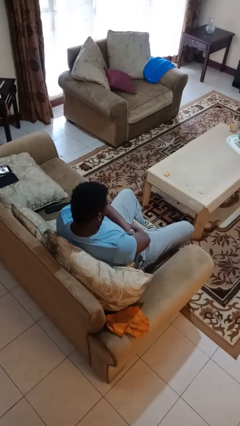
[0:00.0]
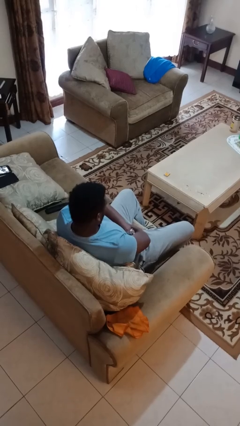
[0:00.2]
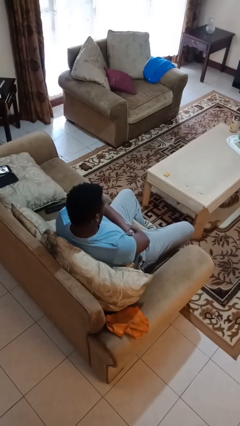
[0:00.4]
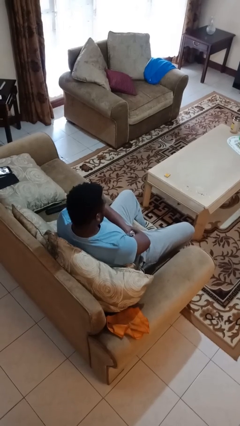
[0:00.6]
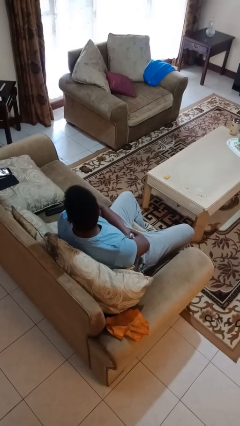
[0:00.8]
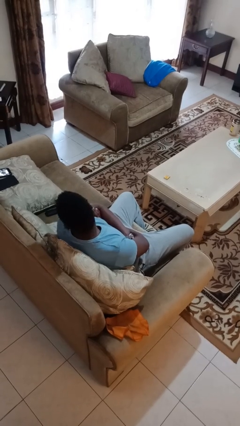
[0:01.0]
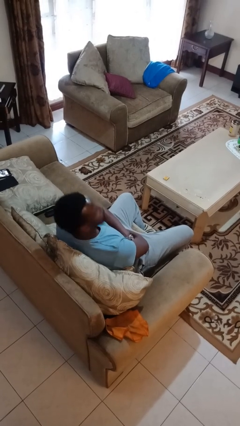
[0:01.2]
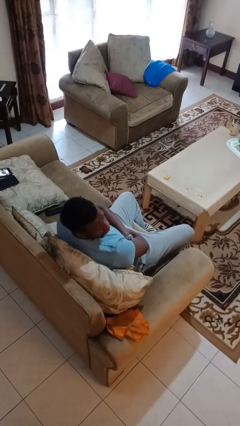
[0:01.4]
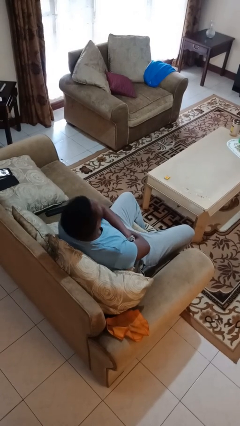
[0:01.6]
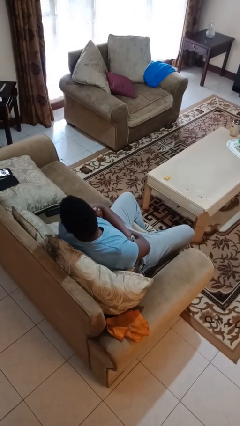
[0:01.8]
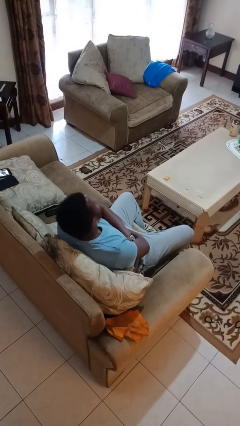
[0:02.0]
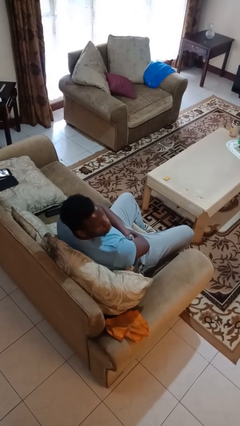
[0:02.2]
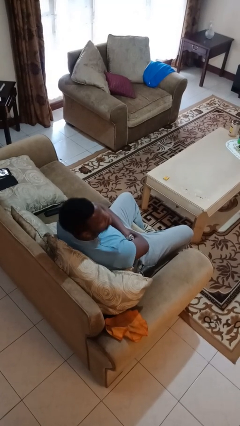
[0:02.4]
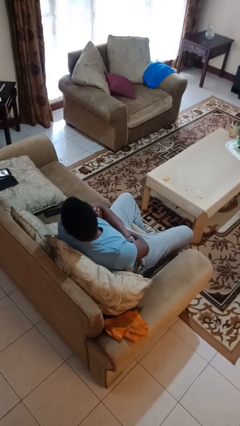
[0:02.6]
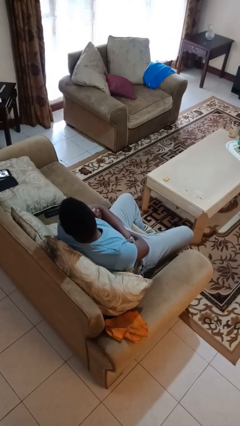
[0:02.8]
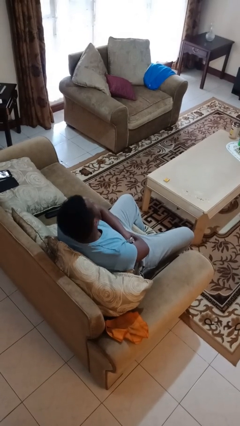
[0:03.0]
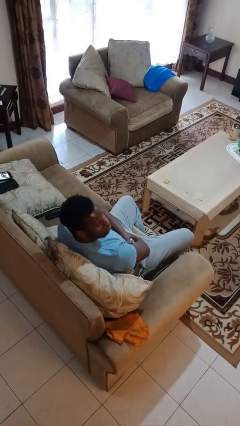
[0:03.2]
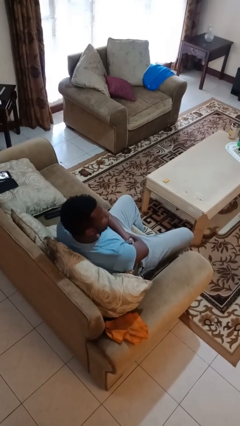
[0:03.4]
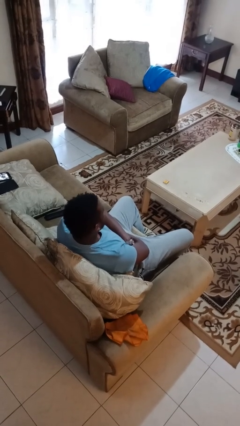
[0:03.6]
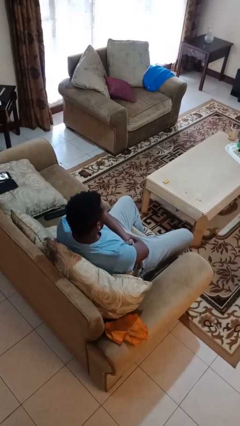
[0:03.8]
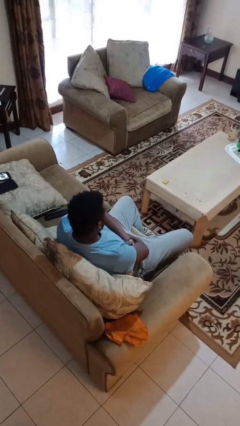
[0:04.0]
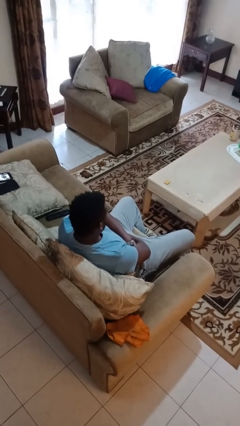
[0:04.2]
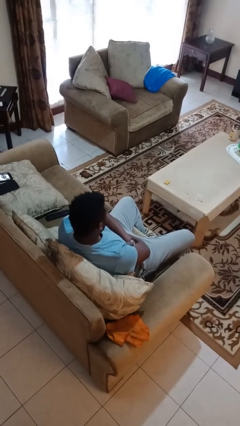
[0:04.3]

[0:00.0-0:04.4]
person shakes head

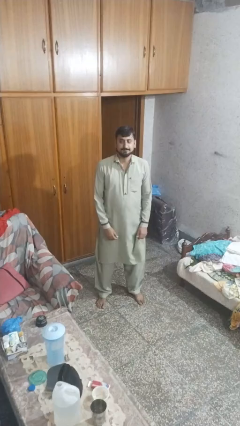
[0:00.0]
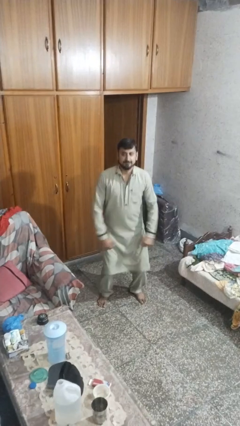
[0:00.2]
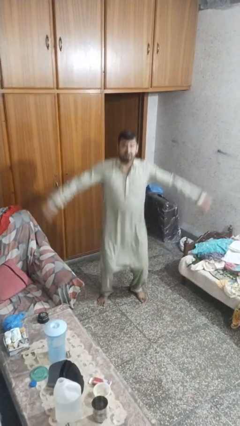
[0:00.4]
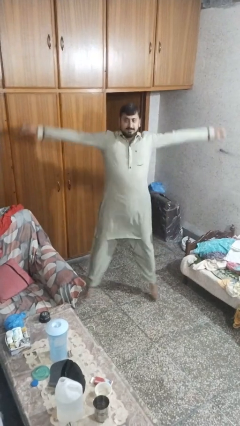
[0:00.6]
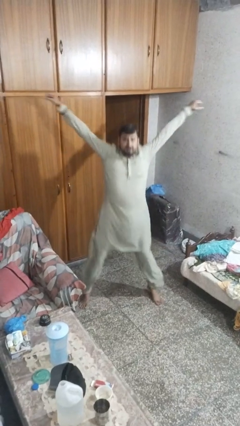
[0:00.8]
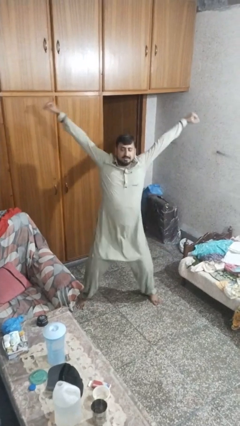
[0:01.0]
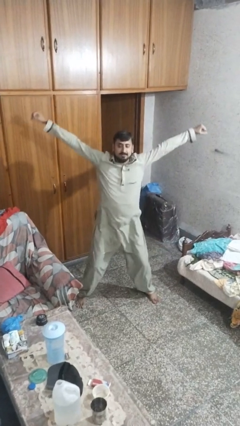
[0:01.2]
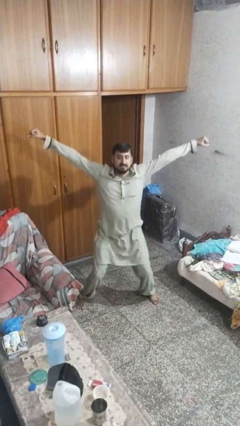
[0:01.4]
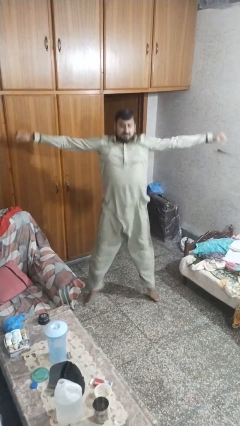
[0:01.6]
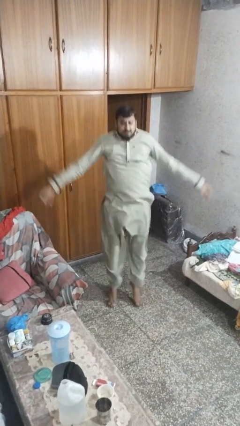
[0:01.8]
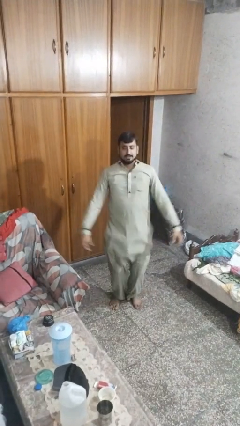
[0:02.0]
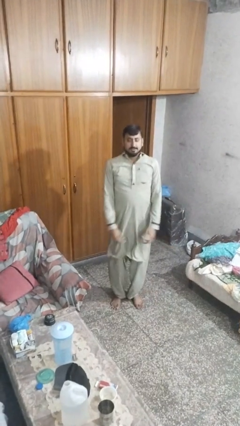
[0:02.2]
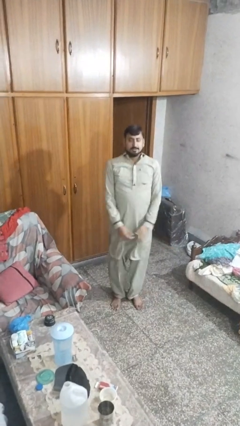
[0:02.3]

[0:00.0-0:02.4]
person exercises with jumping jacks

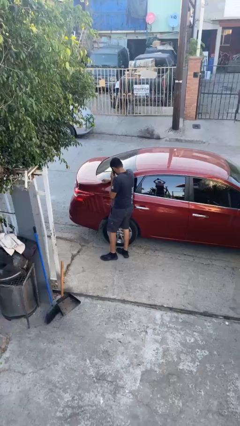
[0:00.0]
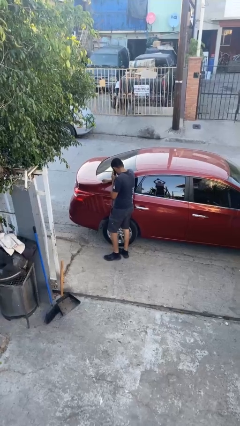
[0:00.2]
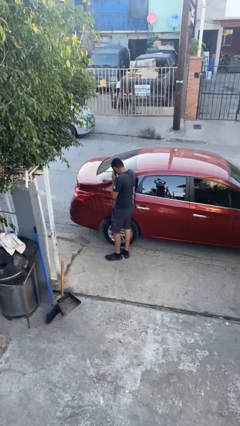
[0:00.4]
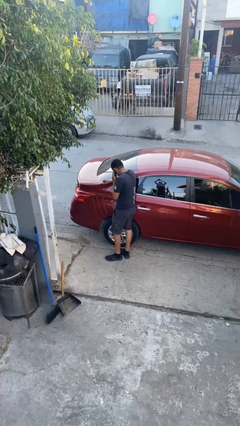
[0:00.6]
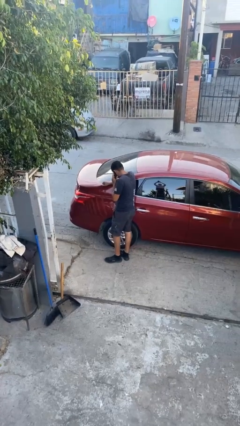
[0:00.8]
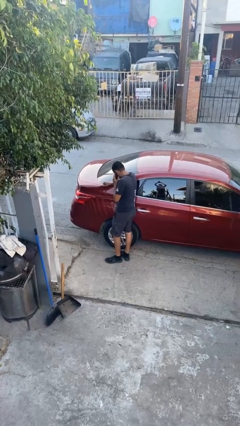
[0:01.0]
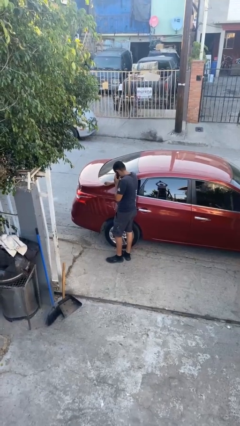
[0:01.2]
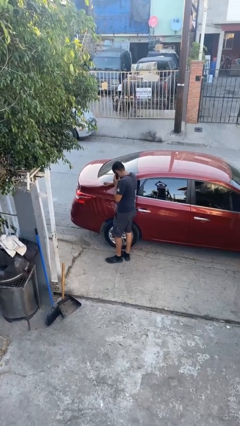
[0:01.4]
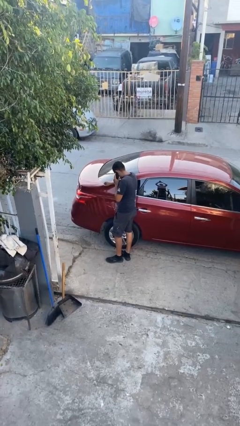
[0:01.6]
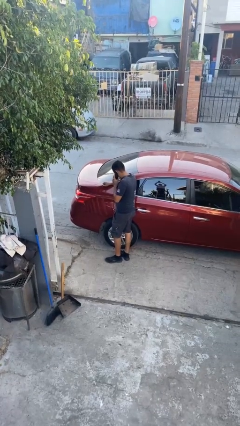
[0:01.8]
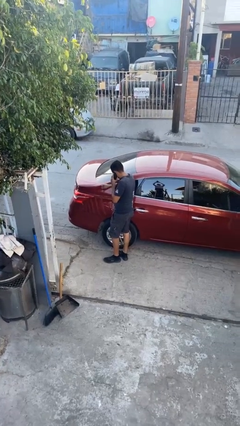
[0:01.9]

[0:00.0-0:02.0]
person leans against car

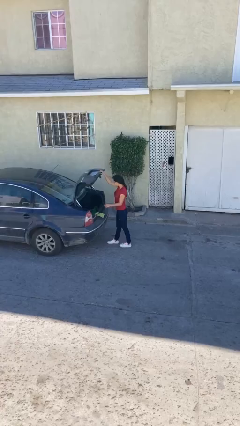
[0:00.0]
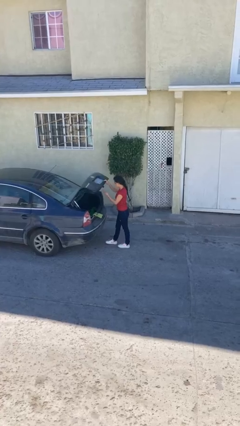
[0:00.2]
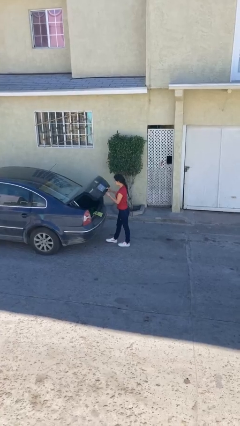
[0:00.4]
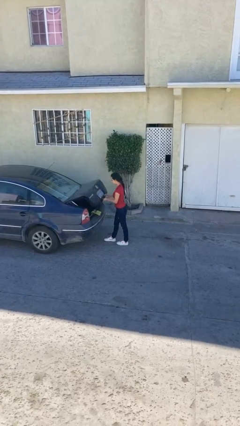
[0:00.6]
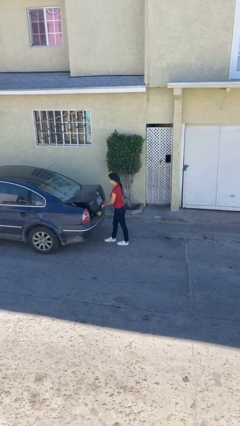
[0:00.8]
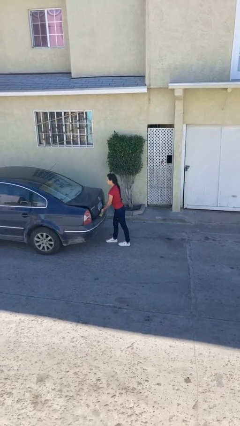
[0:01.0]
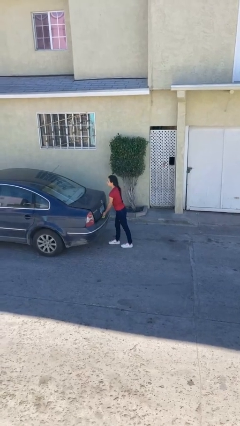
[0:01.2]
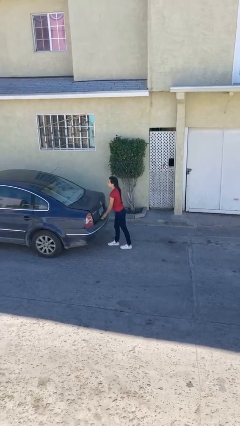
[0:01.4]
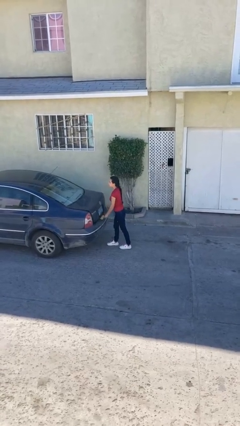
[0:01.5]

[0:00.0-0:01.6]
person closes car trunk

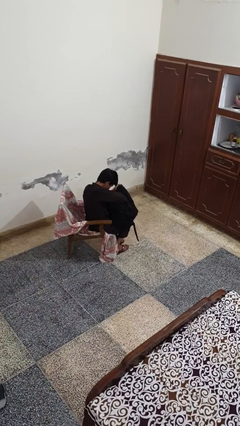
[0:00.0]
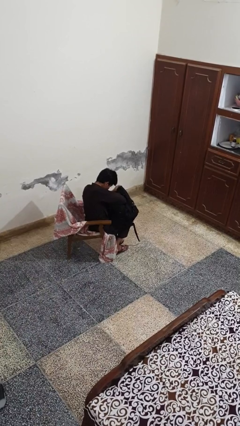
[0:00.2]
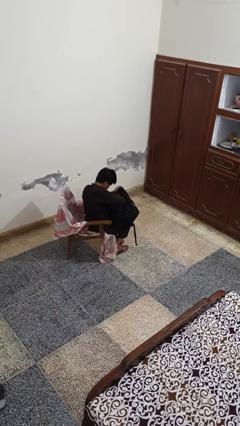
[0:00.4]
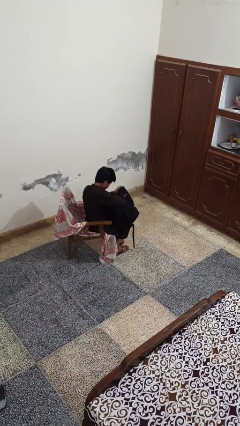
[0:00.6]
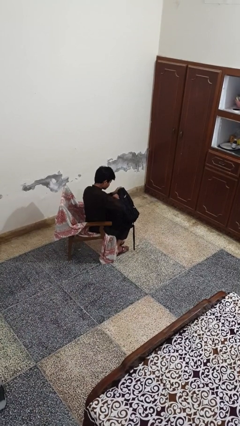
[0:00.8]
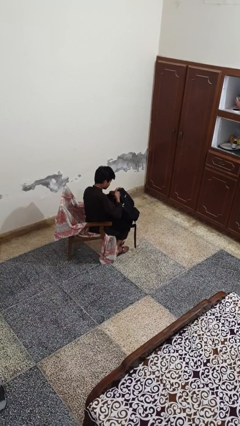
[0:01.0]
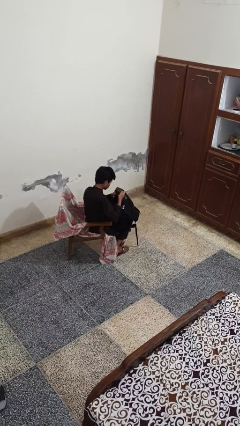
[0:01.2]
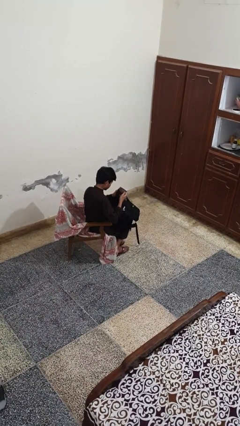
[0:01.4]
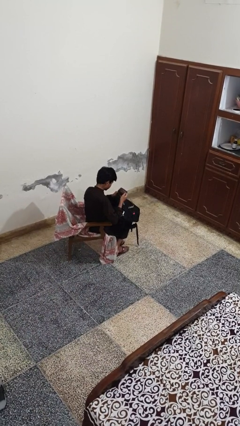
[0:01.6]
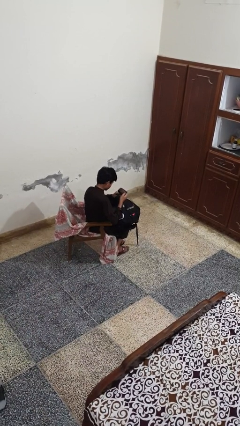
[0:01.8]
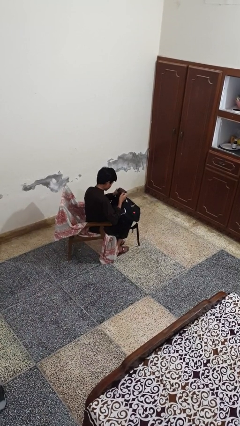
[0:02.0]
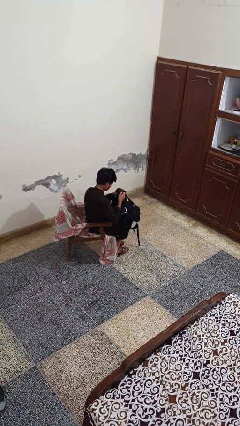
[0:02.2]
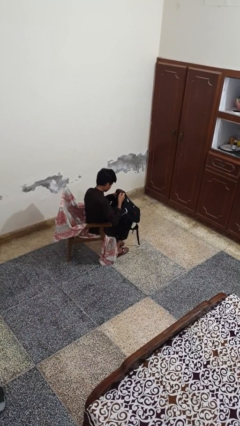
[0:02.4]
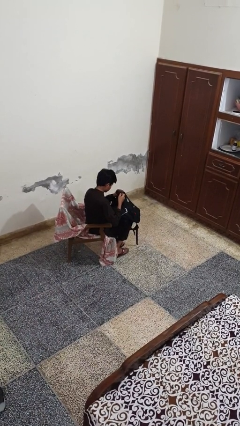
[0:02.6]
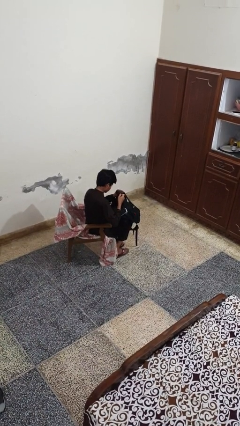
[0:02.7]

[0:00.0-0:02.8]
person takes object from backpack

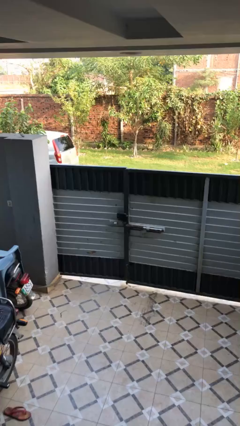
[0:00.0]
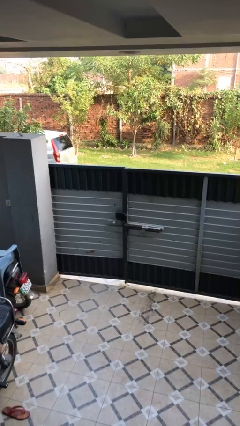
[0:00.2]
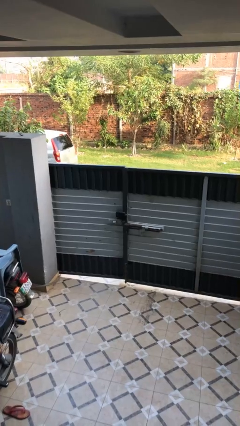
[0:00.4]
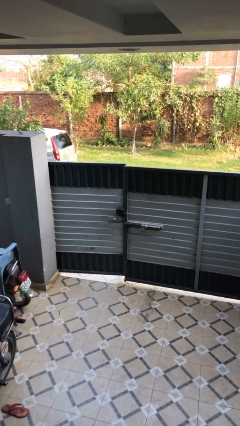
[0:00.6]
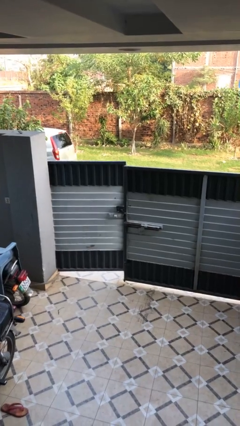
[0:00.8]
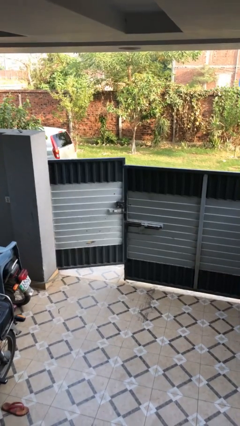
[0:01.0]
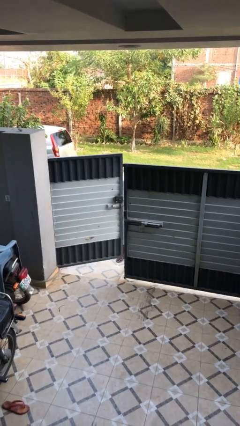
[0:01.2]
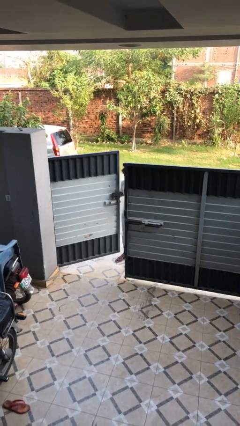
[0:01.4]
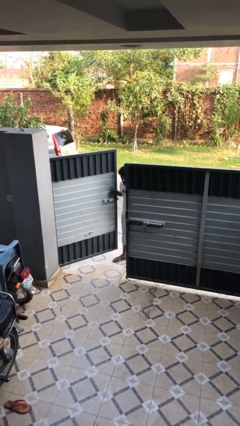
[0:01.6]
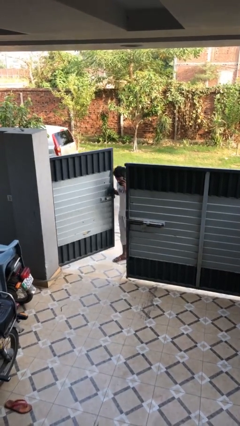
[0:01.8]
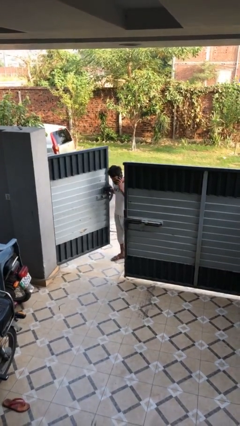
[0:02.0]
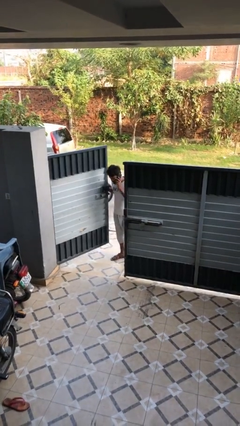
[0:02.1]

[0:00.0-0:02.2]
person opens facility door

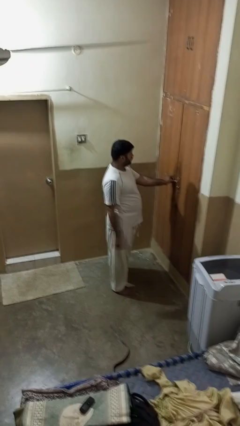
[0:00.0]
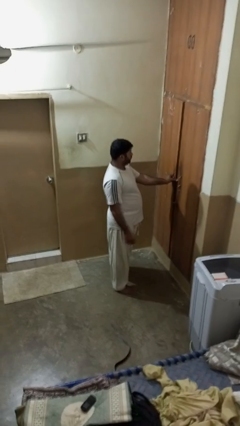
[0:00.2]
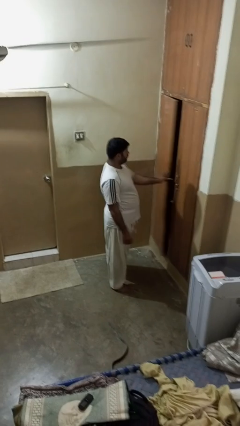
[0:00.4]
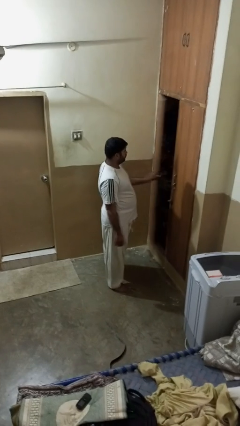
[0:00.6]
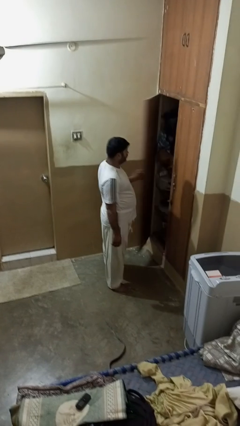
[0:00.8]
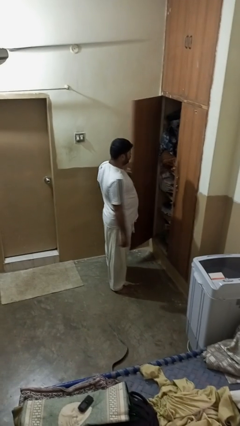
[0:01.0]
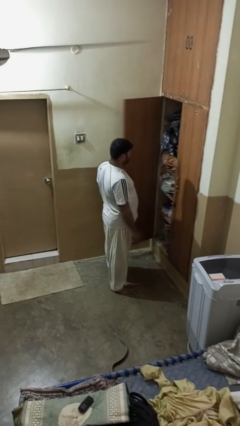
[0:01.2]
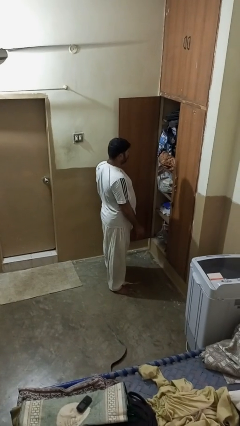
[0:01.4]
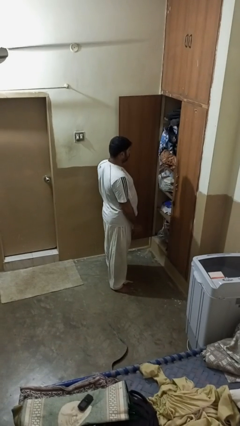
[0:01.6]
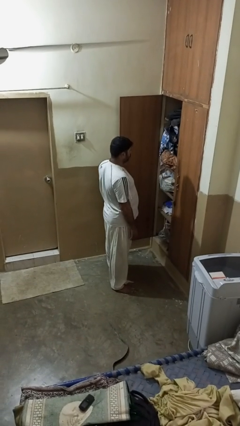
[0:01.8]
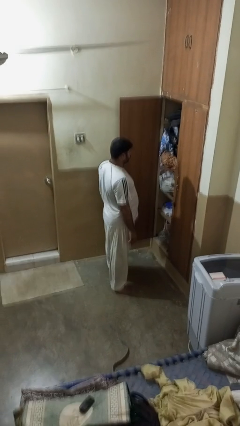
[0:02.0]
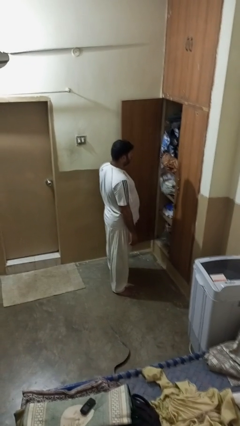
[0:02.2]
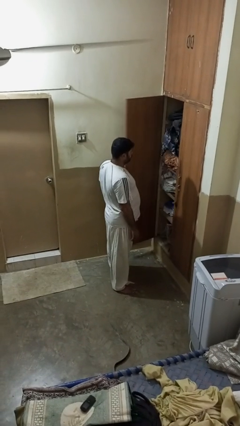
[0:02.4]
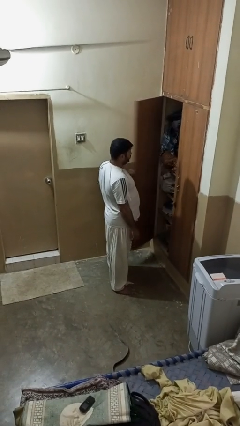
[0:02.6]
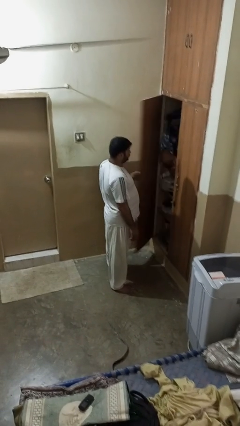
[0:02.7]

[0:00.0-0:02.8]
person opens closet door
